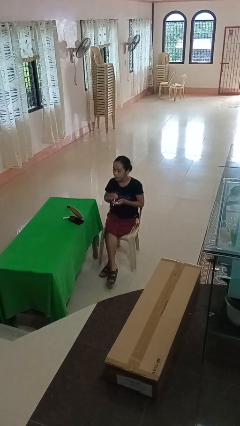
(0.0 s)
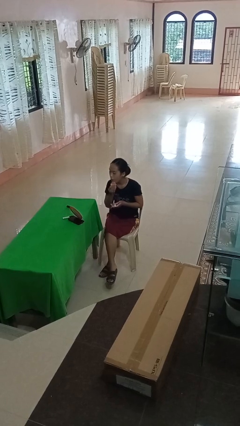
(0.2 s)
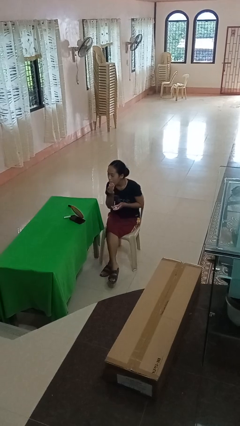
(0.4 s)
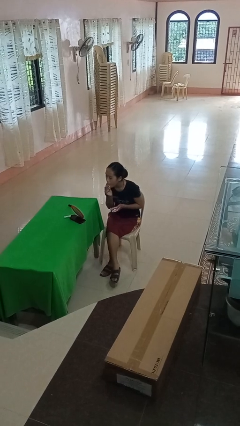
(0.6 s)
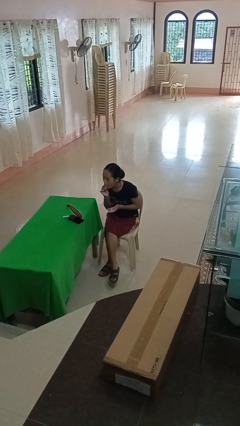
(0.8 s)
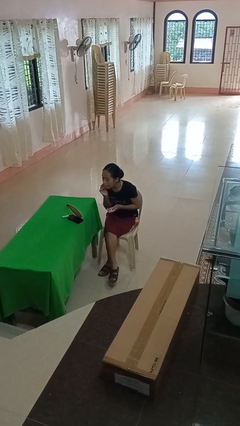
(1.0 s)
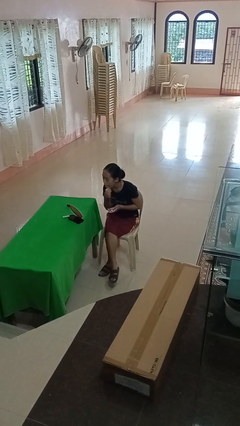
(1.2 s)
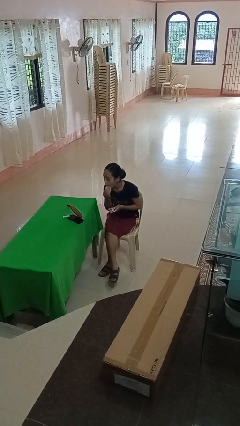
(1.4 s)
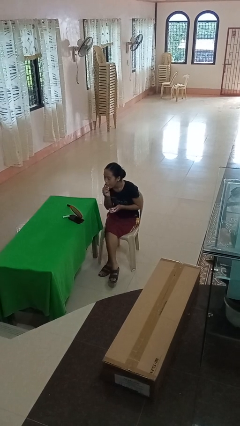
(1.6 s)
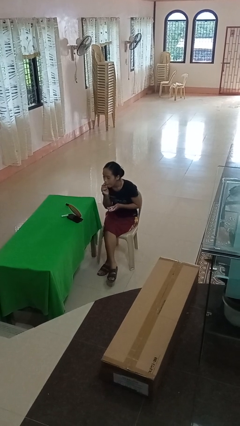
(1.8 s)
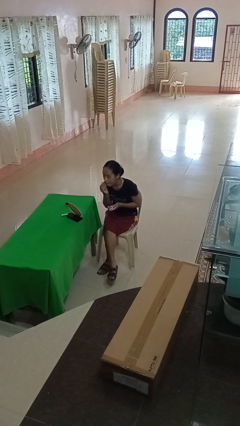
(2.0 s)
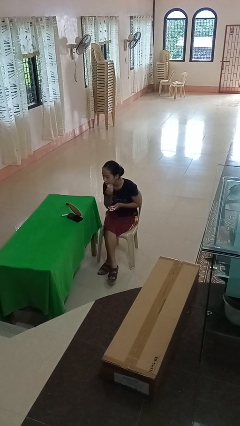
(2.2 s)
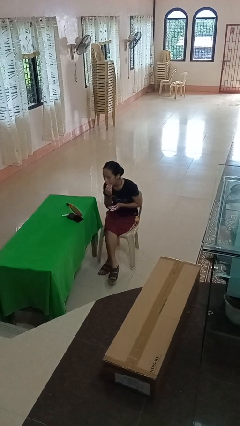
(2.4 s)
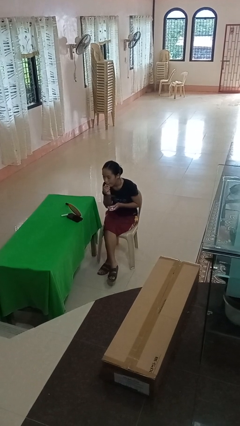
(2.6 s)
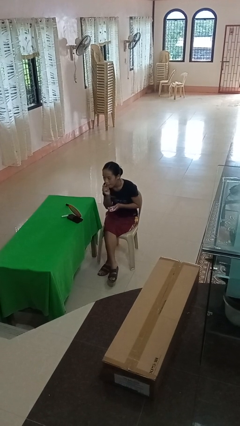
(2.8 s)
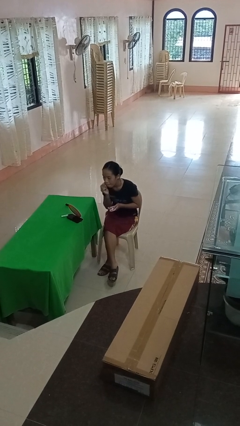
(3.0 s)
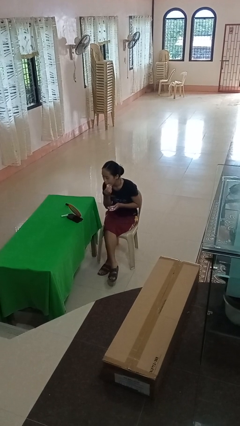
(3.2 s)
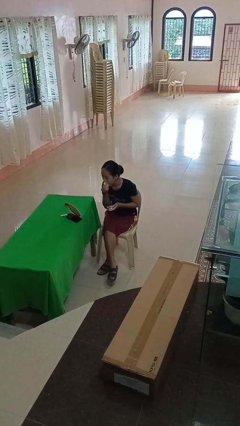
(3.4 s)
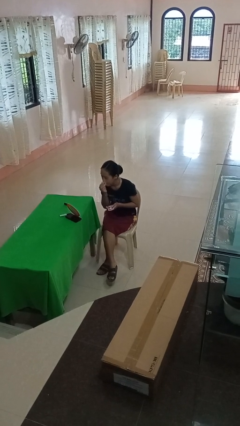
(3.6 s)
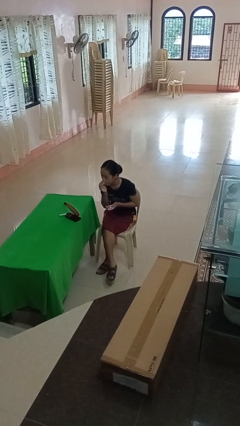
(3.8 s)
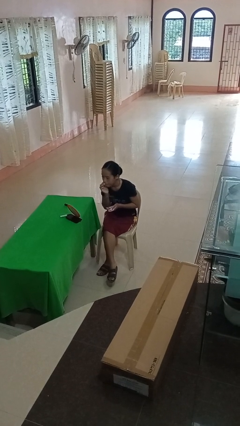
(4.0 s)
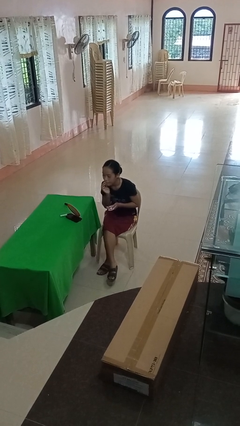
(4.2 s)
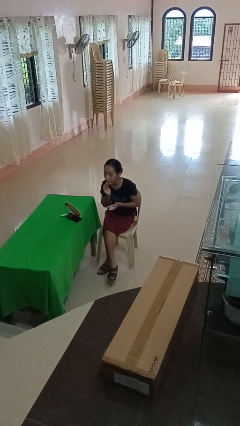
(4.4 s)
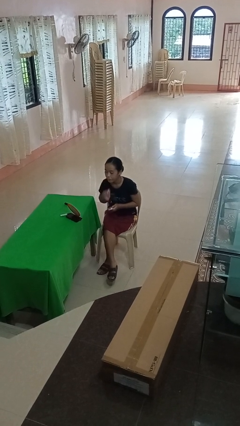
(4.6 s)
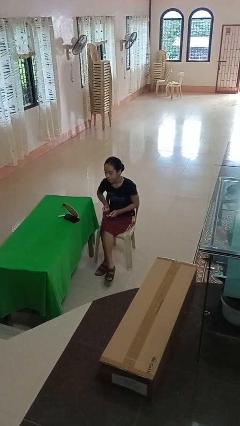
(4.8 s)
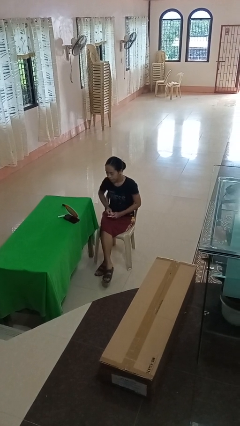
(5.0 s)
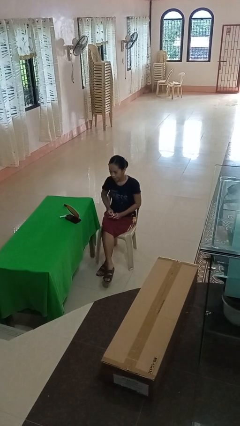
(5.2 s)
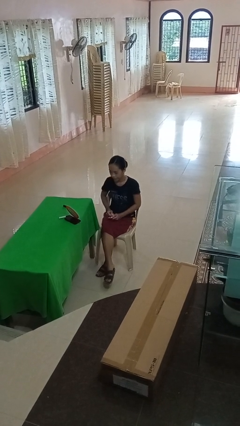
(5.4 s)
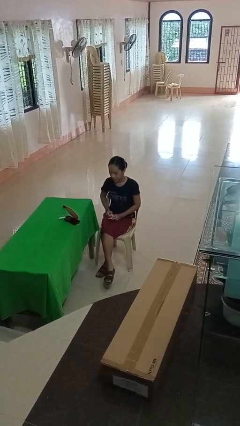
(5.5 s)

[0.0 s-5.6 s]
person applies foundation makeup

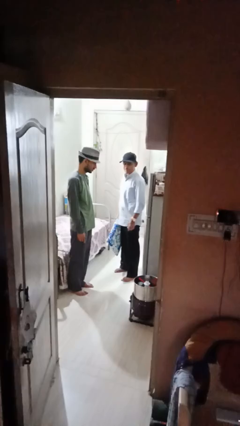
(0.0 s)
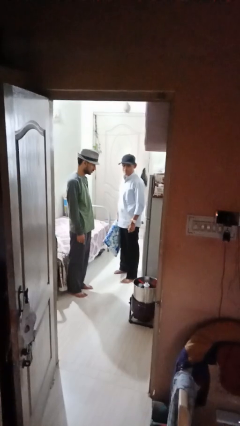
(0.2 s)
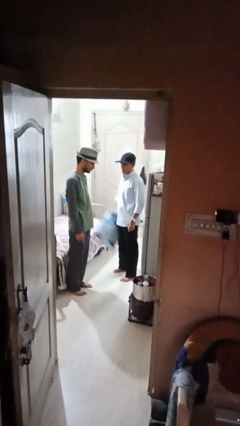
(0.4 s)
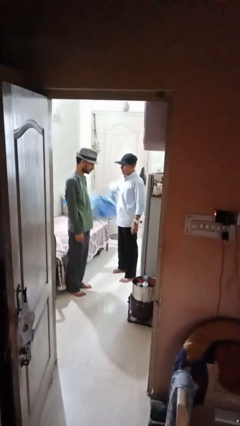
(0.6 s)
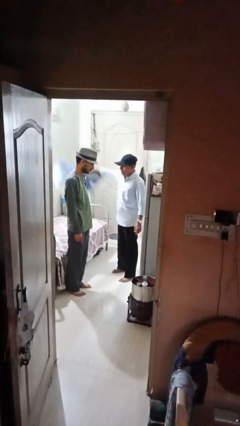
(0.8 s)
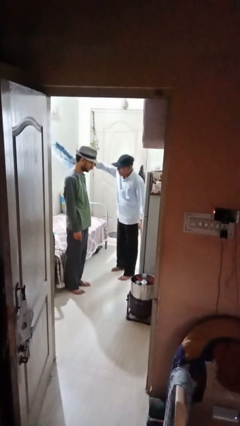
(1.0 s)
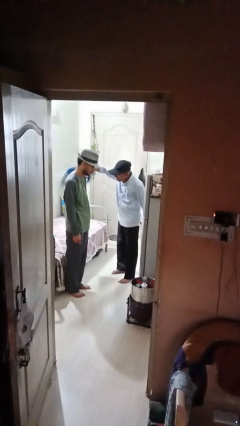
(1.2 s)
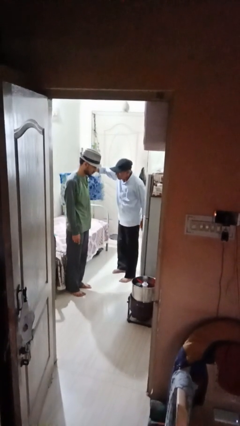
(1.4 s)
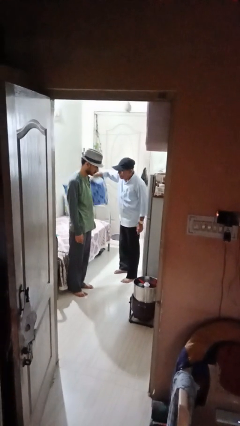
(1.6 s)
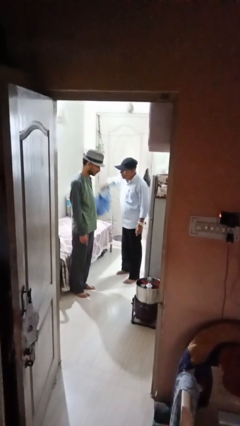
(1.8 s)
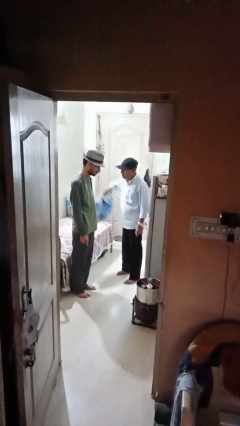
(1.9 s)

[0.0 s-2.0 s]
person hits person with pillow

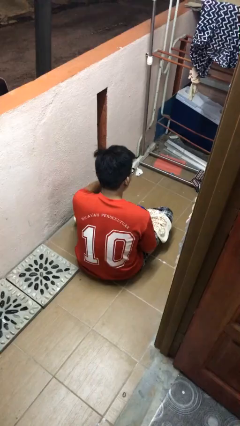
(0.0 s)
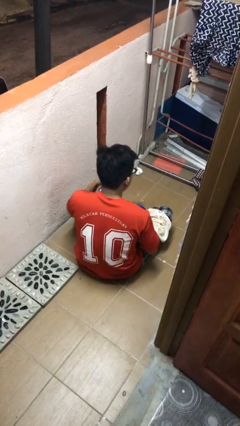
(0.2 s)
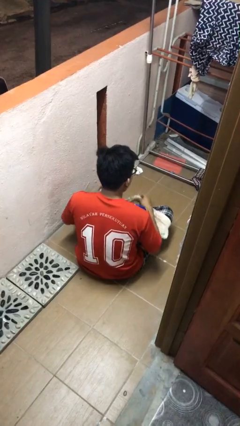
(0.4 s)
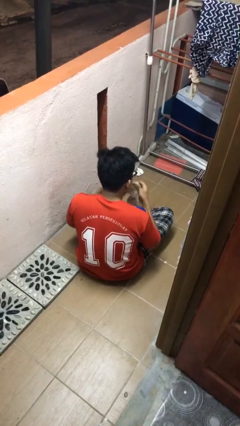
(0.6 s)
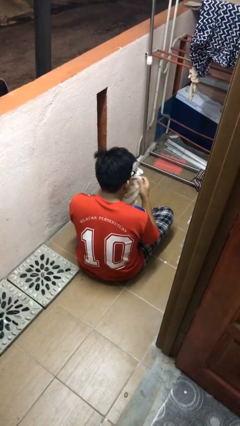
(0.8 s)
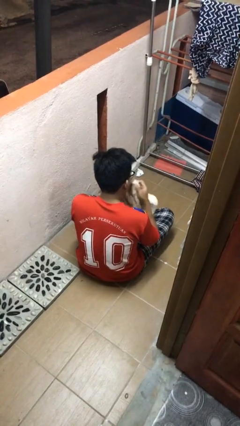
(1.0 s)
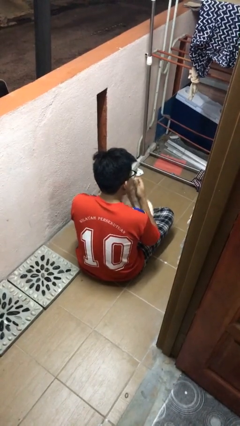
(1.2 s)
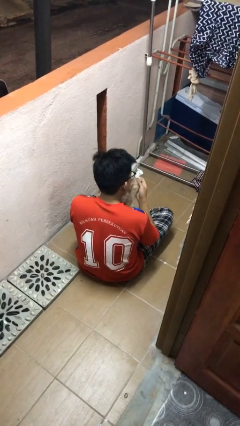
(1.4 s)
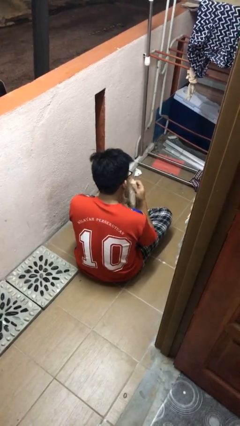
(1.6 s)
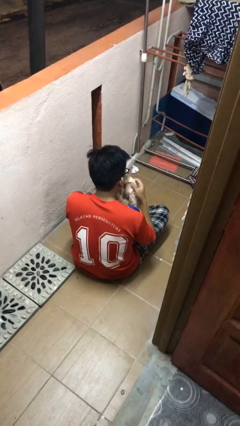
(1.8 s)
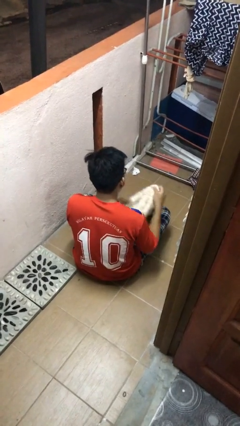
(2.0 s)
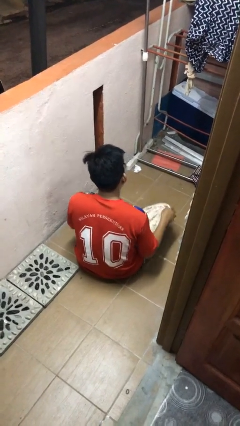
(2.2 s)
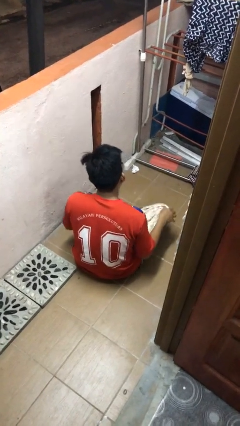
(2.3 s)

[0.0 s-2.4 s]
person wipes mouth with napkin

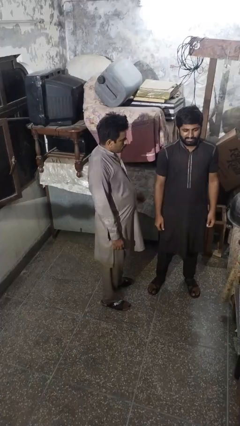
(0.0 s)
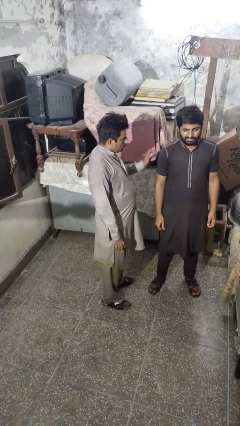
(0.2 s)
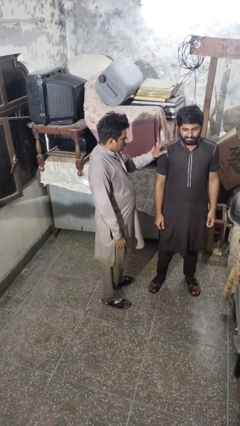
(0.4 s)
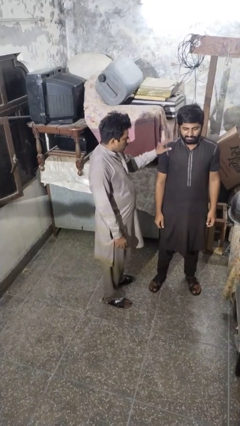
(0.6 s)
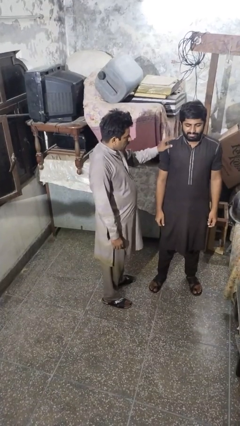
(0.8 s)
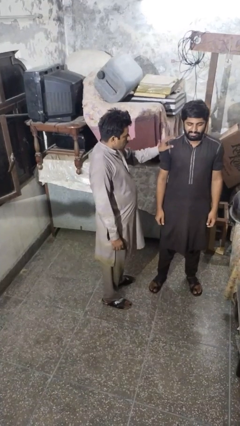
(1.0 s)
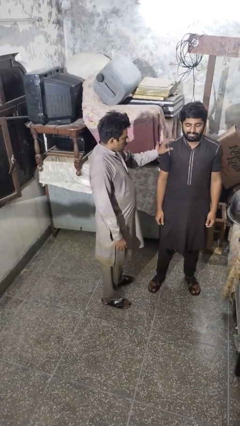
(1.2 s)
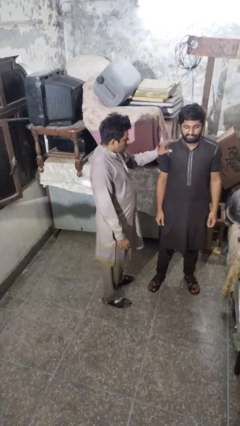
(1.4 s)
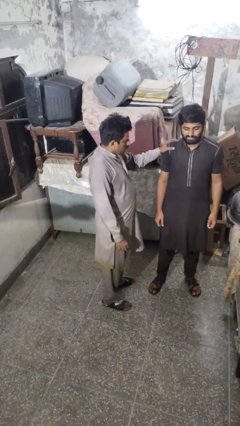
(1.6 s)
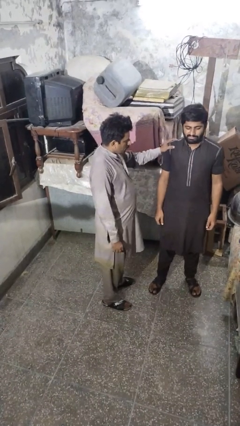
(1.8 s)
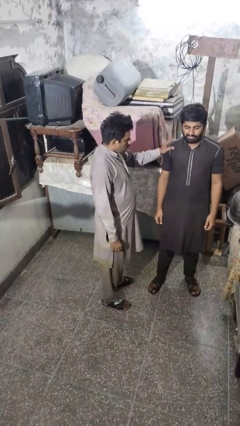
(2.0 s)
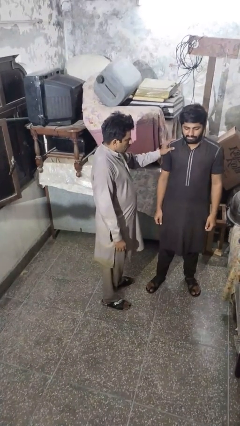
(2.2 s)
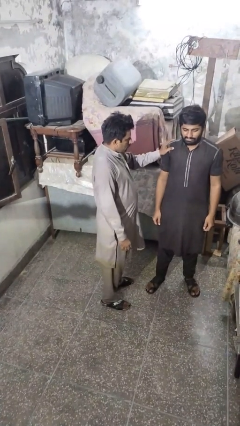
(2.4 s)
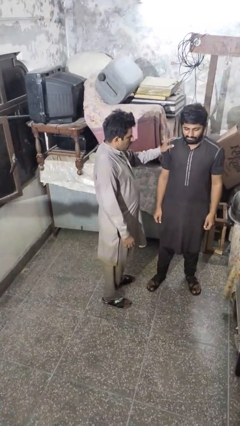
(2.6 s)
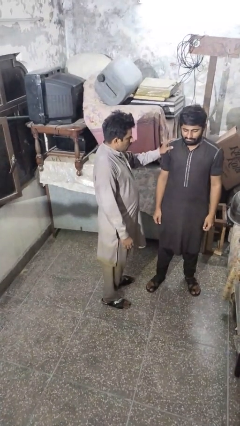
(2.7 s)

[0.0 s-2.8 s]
person grabs person by shoulder

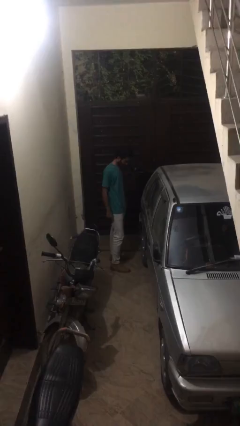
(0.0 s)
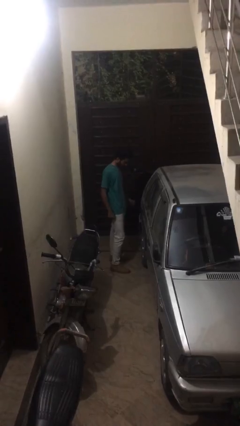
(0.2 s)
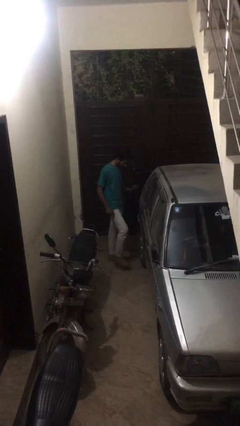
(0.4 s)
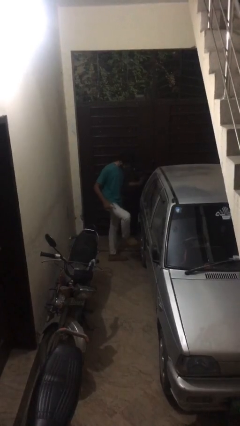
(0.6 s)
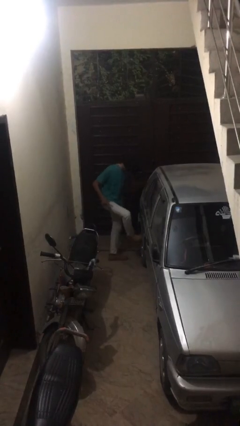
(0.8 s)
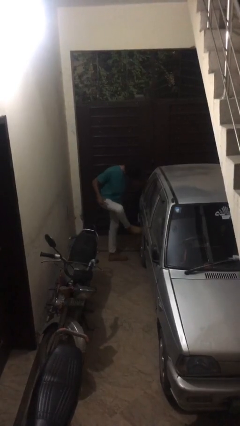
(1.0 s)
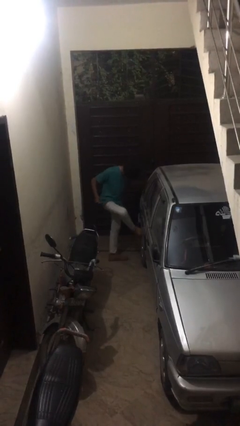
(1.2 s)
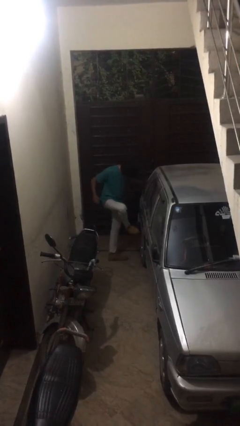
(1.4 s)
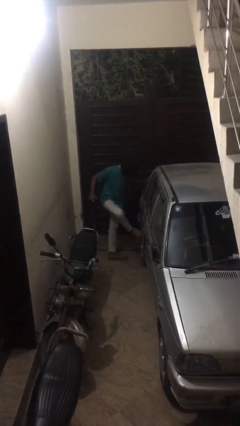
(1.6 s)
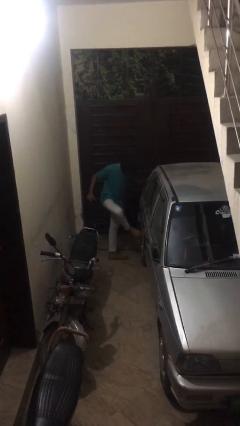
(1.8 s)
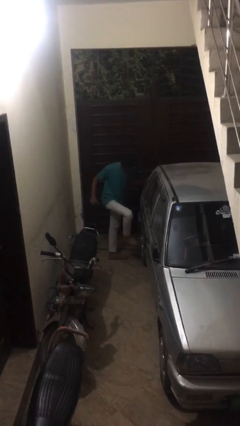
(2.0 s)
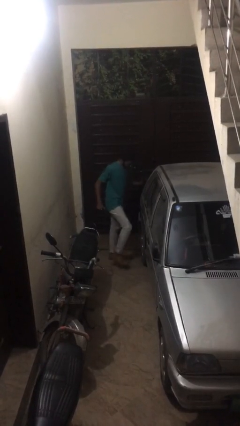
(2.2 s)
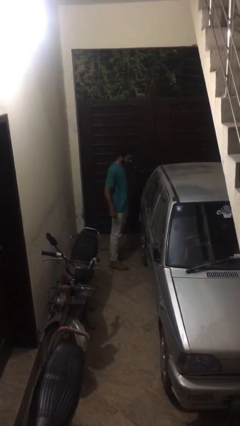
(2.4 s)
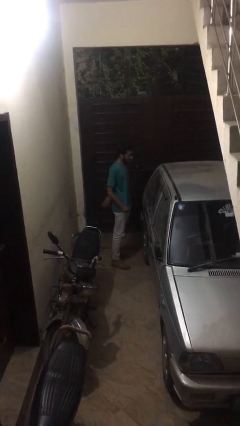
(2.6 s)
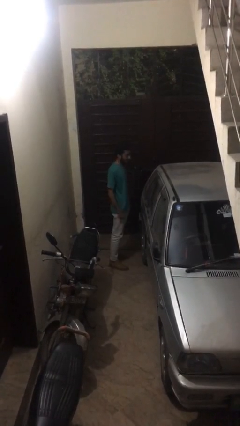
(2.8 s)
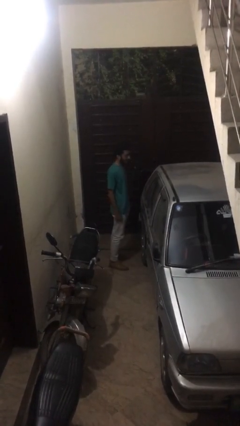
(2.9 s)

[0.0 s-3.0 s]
person kicks car tires

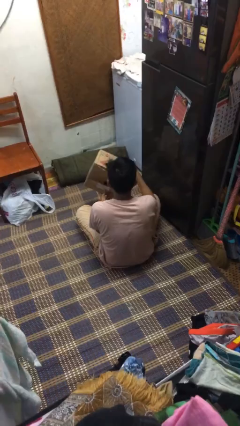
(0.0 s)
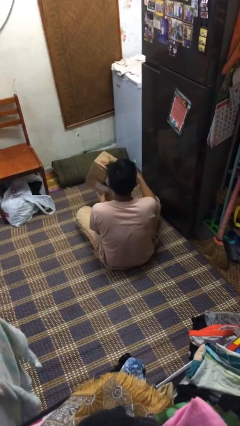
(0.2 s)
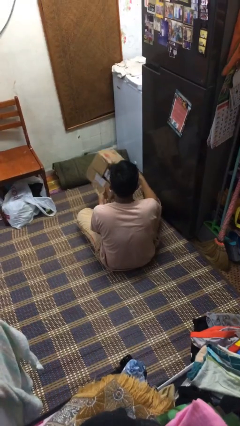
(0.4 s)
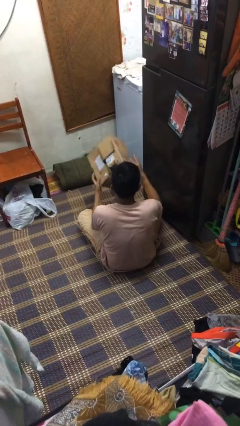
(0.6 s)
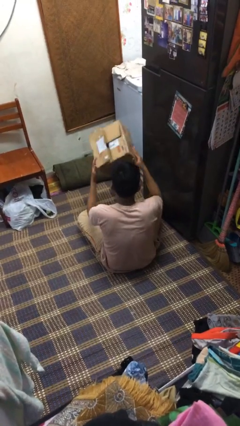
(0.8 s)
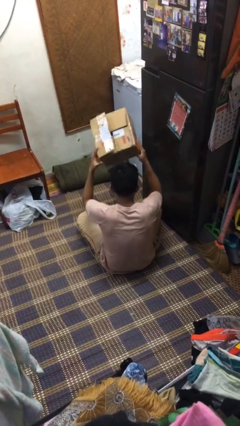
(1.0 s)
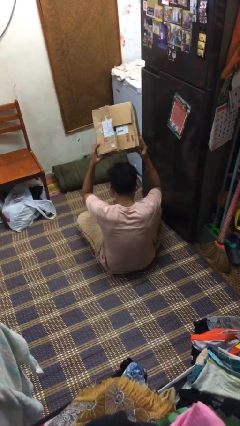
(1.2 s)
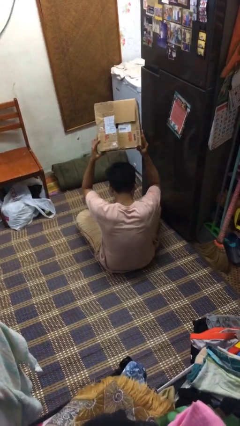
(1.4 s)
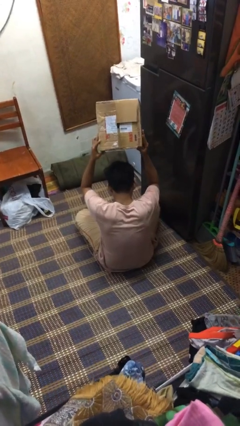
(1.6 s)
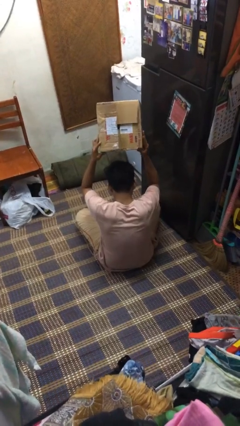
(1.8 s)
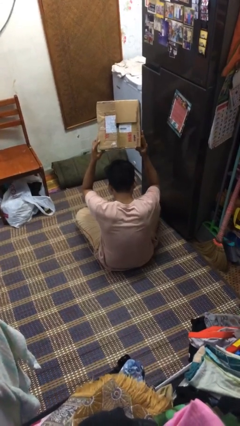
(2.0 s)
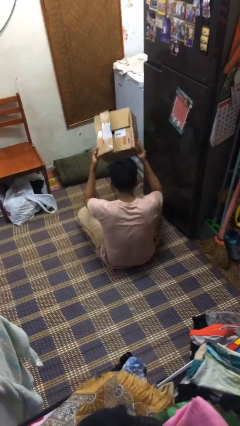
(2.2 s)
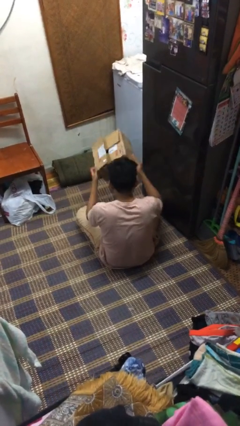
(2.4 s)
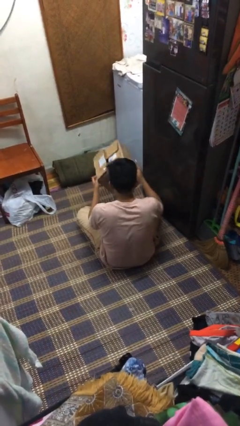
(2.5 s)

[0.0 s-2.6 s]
person holds object above head
